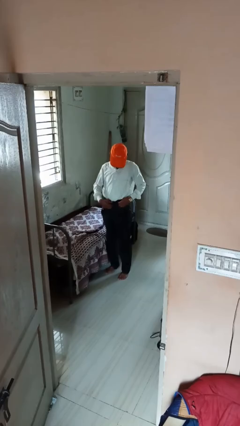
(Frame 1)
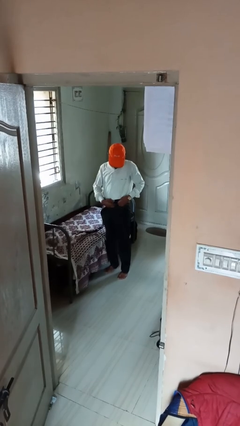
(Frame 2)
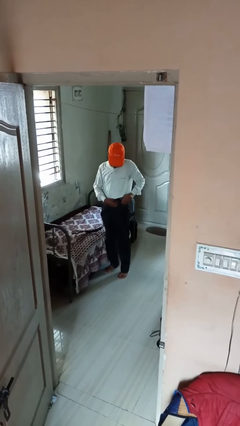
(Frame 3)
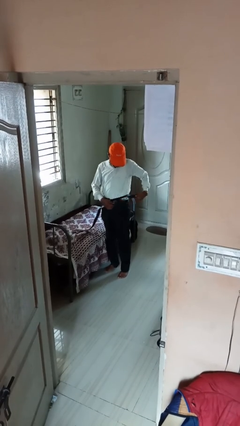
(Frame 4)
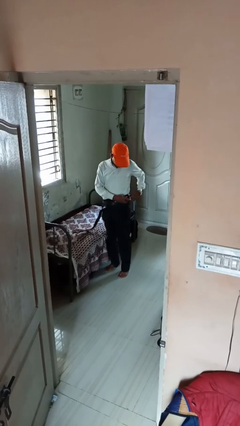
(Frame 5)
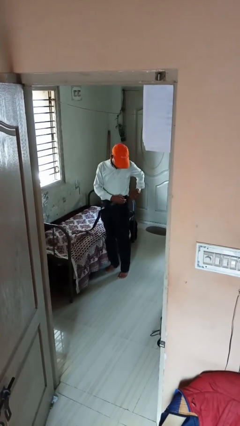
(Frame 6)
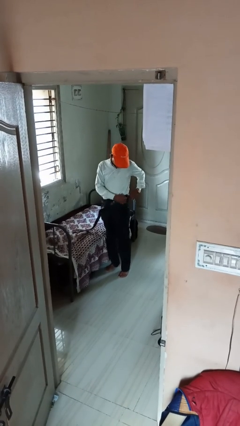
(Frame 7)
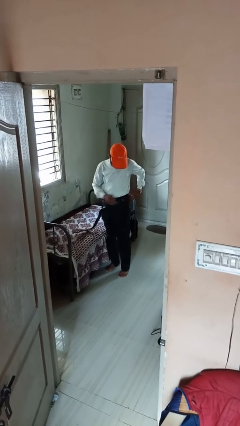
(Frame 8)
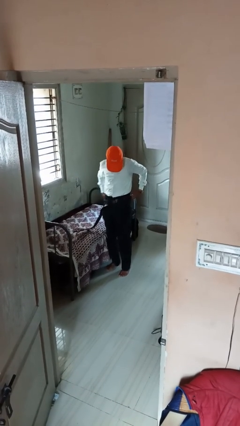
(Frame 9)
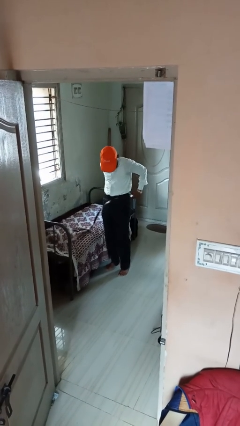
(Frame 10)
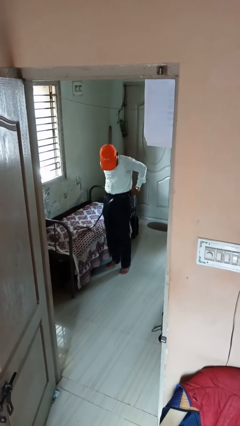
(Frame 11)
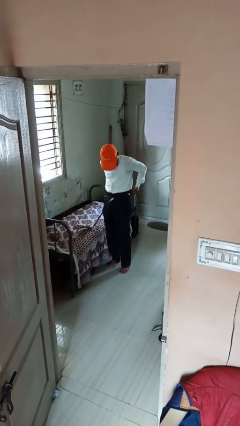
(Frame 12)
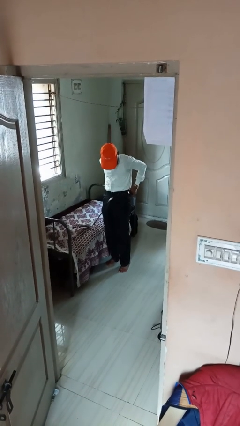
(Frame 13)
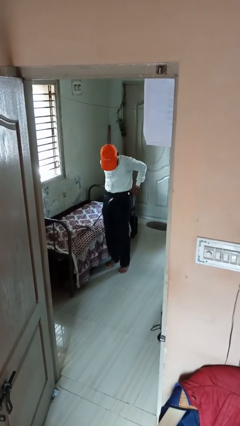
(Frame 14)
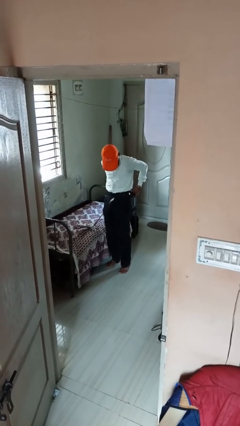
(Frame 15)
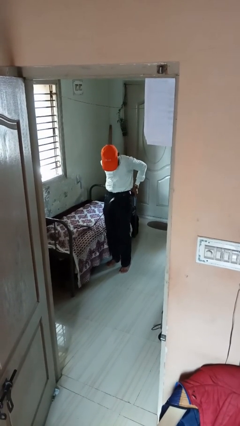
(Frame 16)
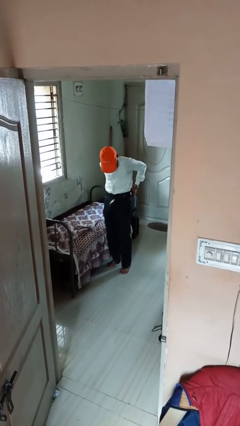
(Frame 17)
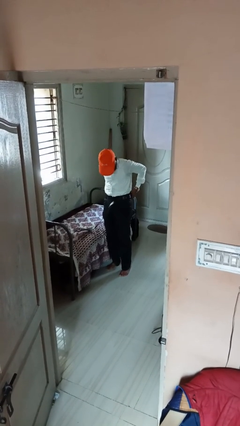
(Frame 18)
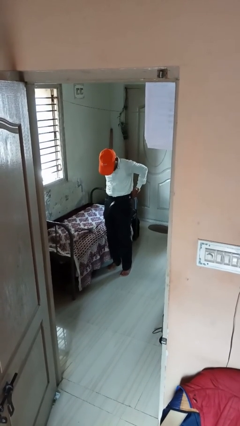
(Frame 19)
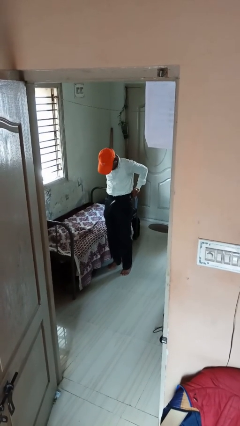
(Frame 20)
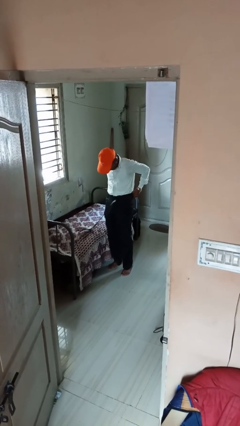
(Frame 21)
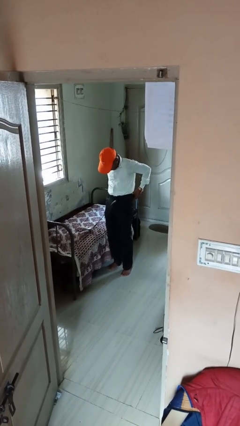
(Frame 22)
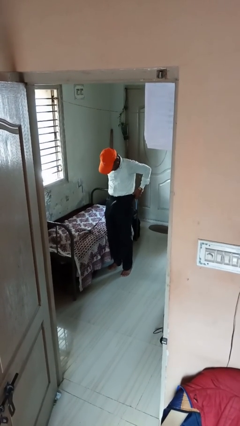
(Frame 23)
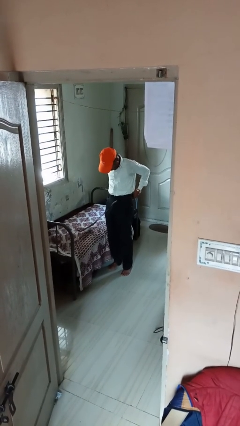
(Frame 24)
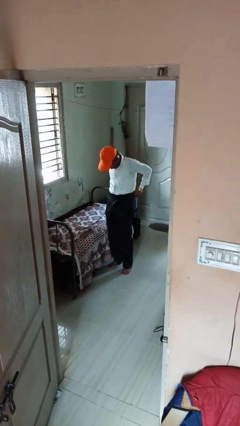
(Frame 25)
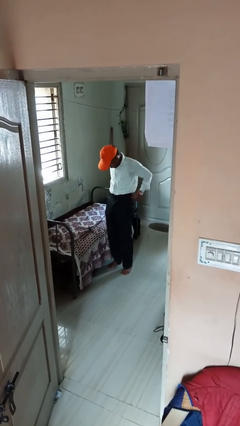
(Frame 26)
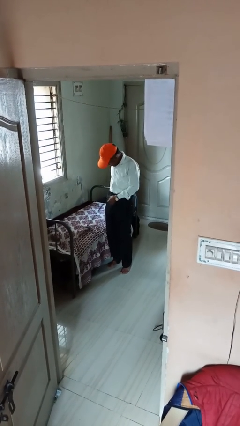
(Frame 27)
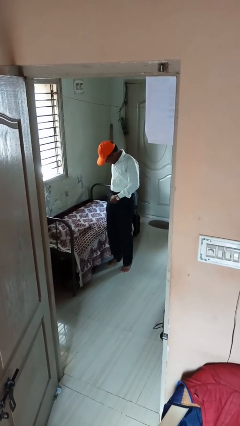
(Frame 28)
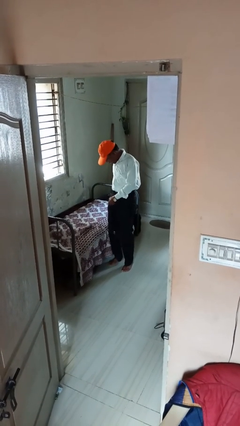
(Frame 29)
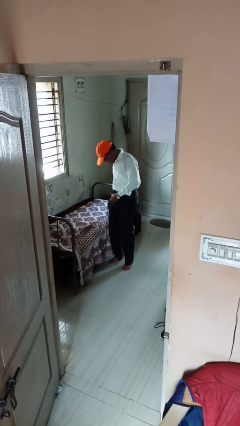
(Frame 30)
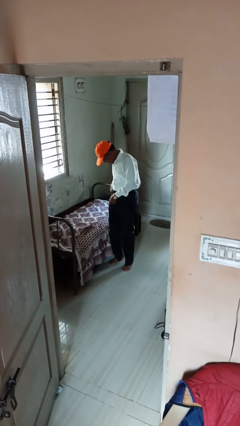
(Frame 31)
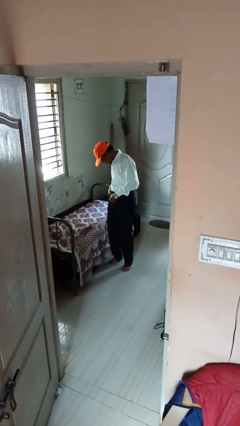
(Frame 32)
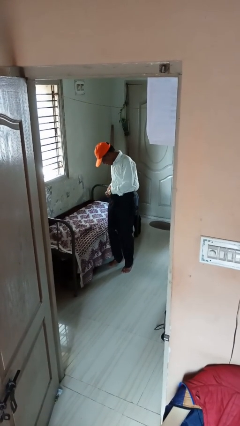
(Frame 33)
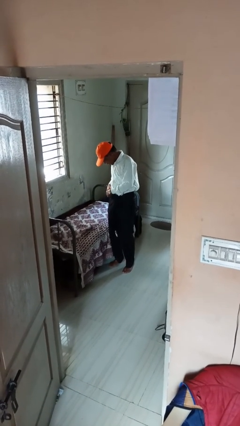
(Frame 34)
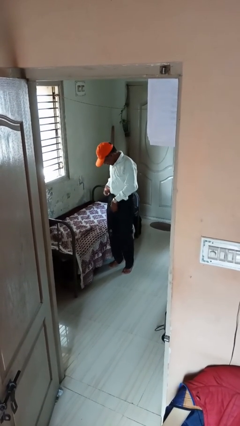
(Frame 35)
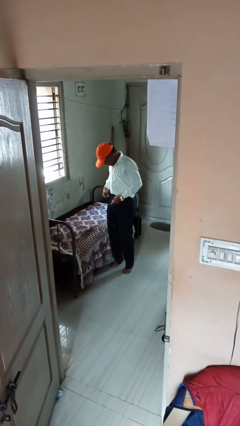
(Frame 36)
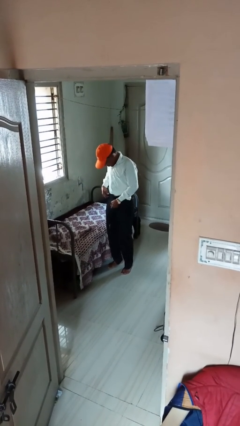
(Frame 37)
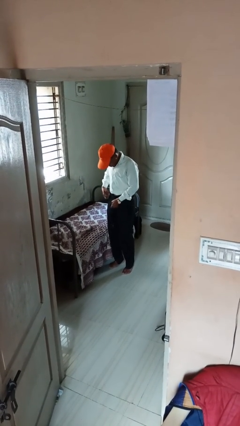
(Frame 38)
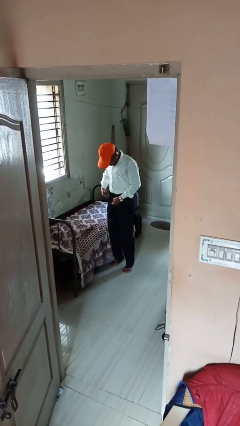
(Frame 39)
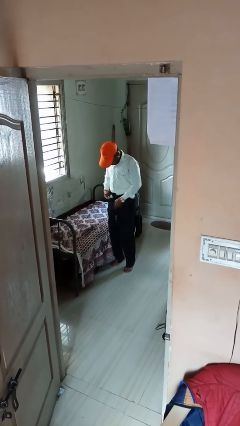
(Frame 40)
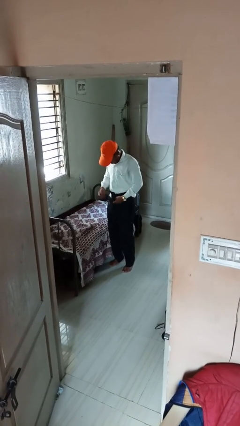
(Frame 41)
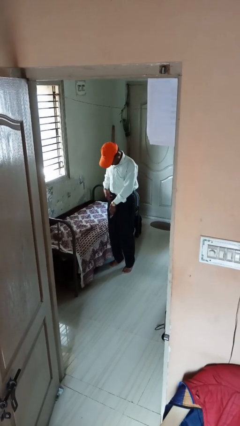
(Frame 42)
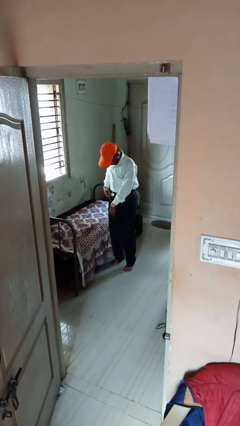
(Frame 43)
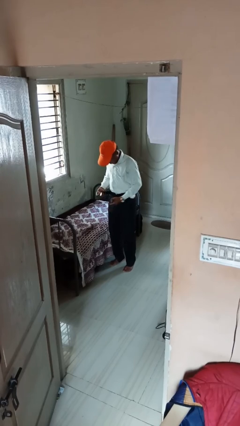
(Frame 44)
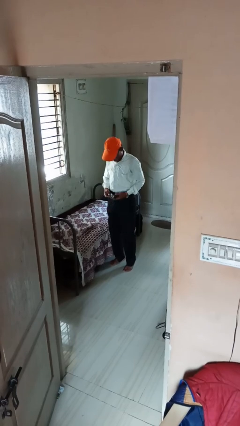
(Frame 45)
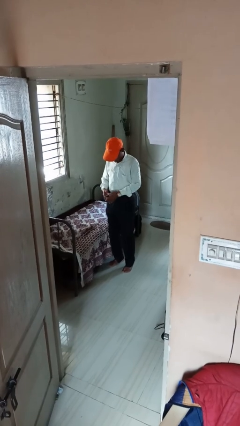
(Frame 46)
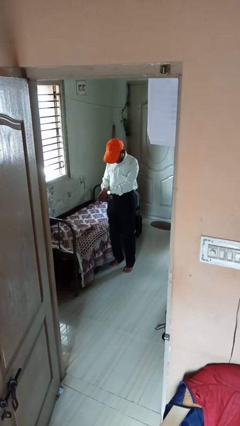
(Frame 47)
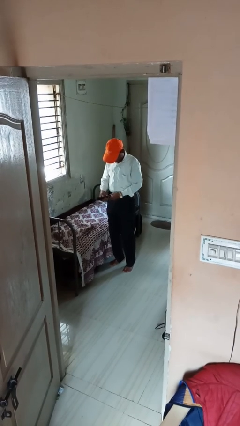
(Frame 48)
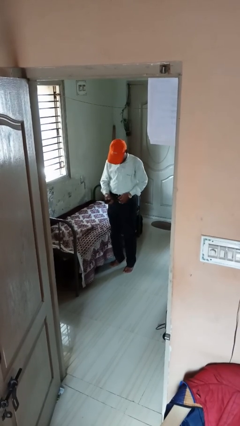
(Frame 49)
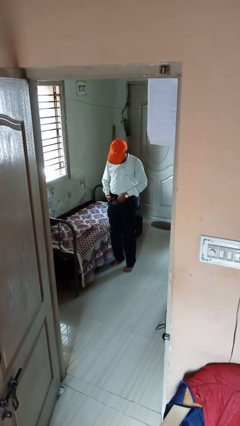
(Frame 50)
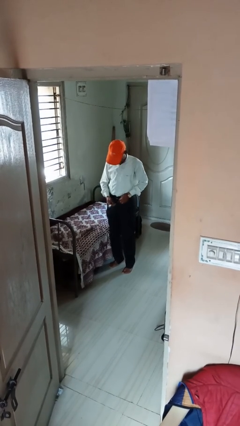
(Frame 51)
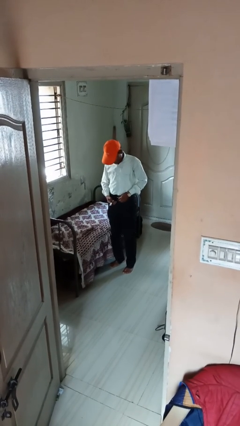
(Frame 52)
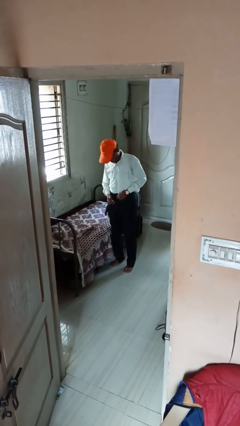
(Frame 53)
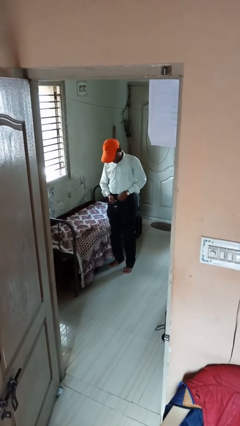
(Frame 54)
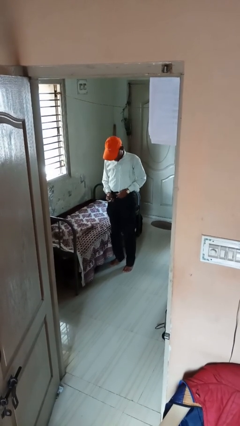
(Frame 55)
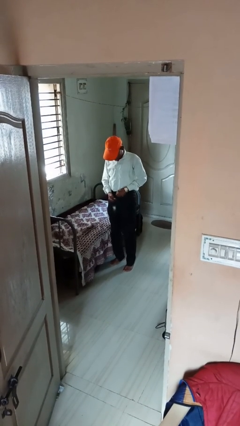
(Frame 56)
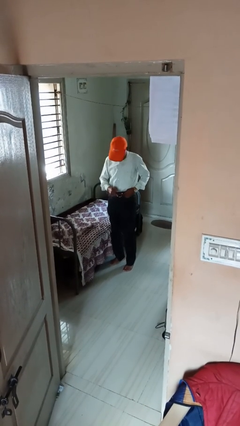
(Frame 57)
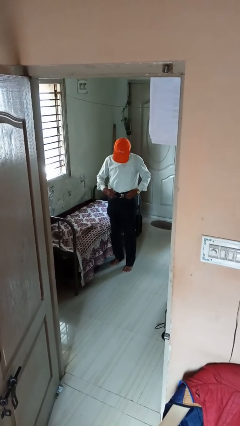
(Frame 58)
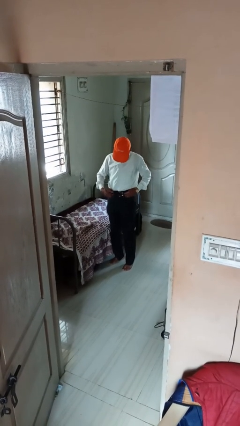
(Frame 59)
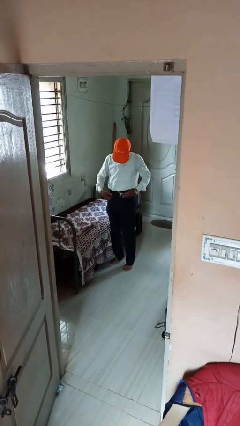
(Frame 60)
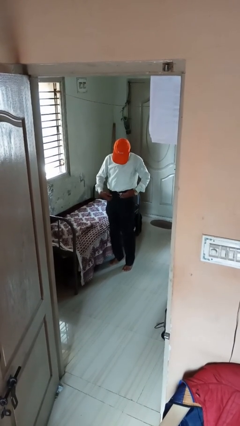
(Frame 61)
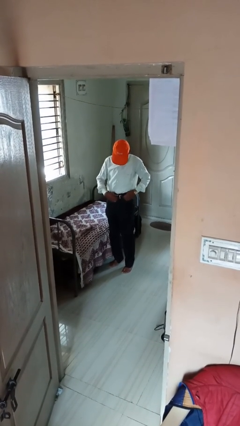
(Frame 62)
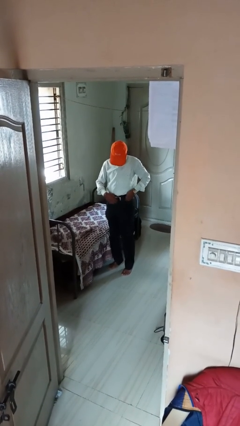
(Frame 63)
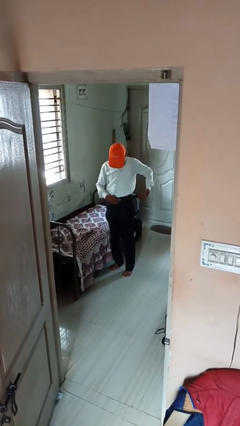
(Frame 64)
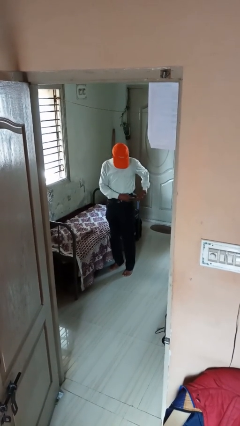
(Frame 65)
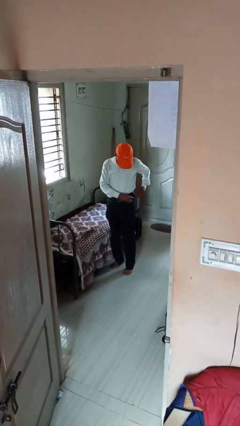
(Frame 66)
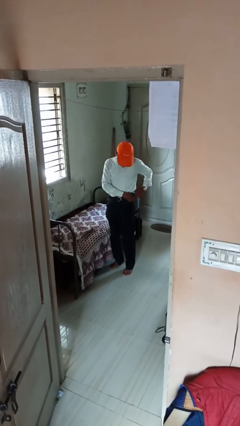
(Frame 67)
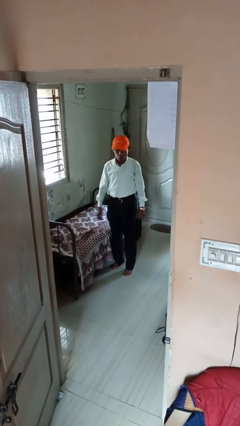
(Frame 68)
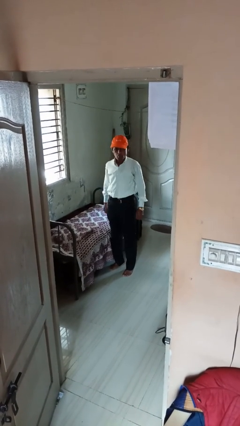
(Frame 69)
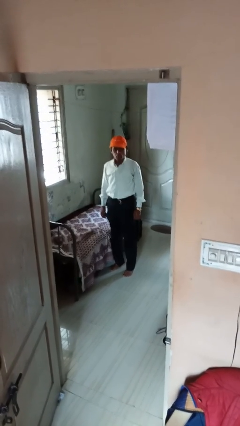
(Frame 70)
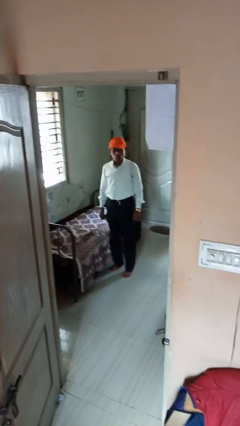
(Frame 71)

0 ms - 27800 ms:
person puts on belt

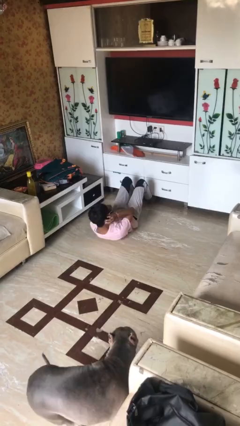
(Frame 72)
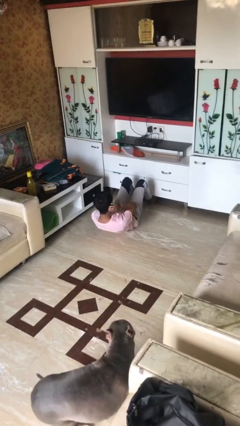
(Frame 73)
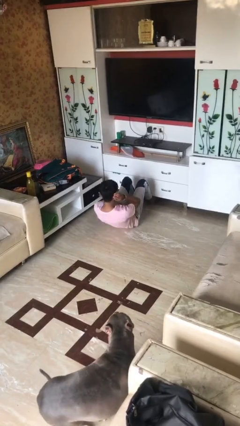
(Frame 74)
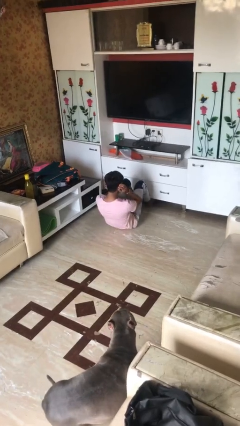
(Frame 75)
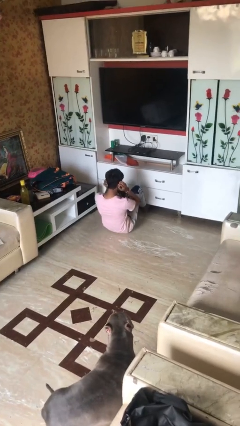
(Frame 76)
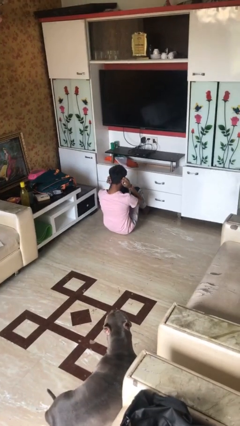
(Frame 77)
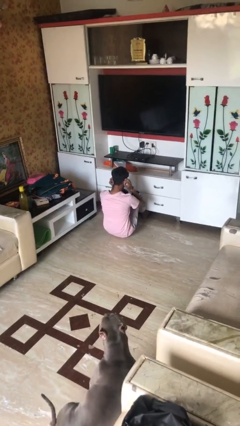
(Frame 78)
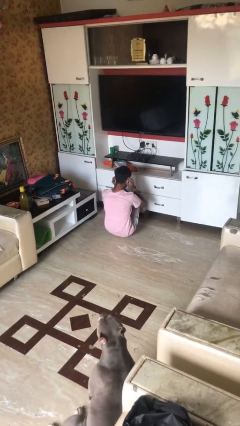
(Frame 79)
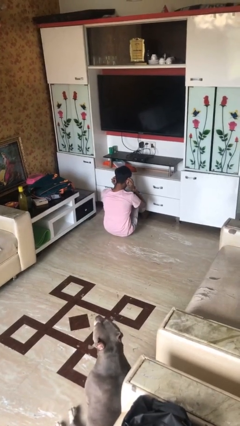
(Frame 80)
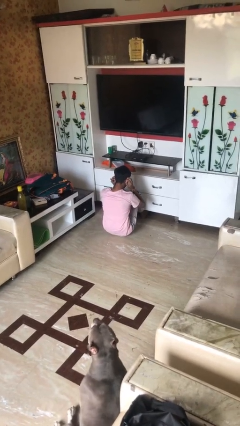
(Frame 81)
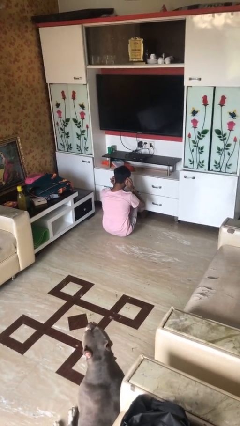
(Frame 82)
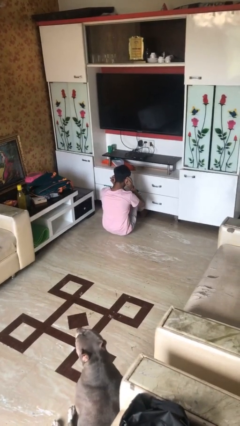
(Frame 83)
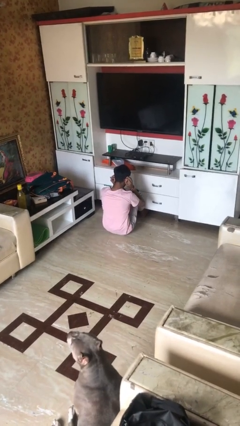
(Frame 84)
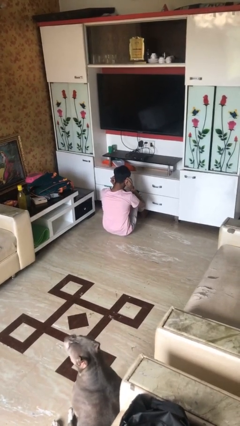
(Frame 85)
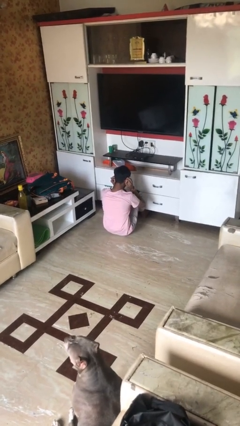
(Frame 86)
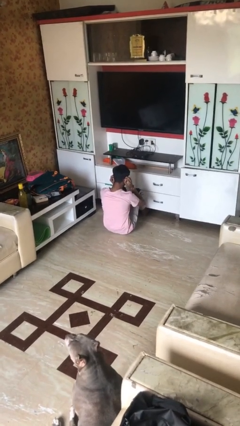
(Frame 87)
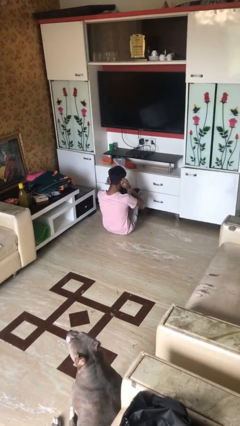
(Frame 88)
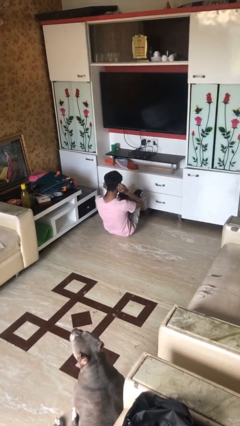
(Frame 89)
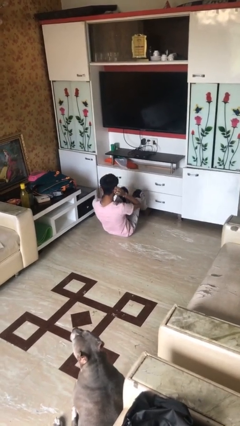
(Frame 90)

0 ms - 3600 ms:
person exercises with situp
